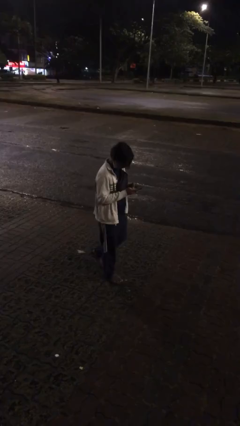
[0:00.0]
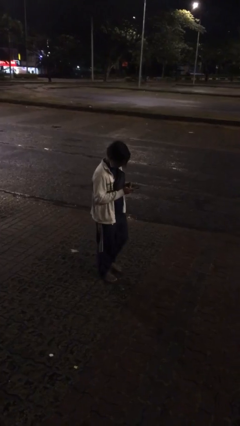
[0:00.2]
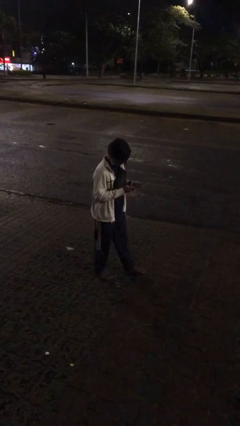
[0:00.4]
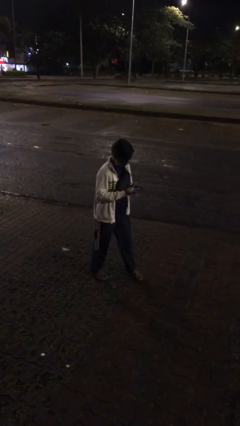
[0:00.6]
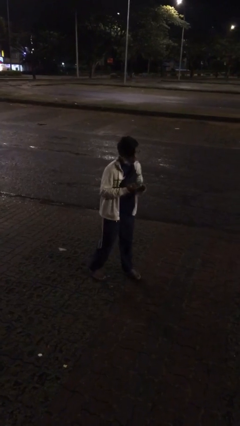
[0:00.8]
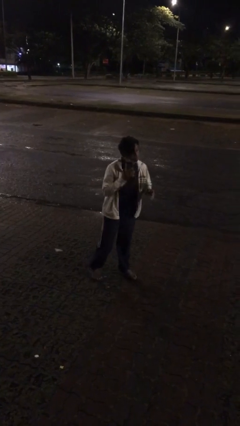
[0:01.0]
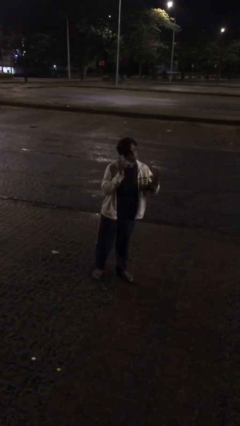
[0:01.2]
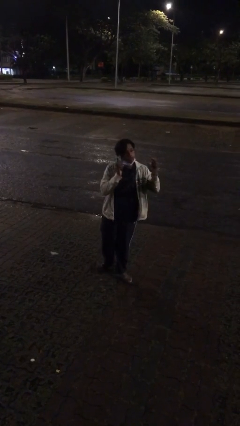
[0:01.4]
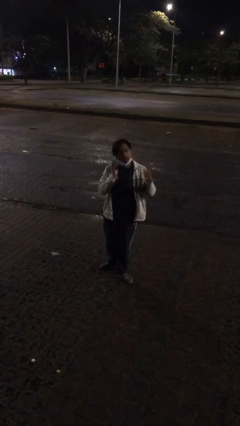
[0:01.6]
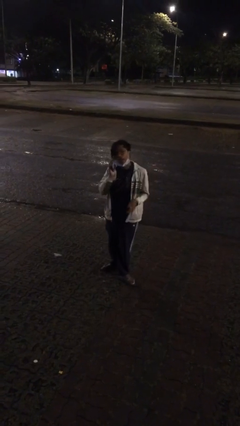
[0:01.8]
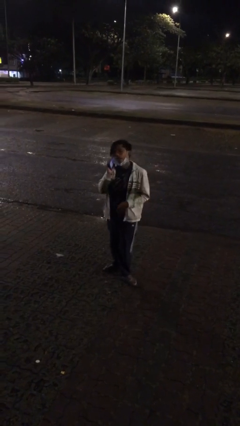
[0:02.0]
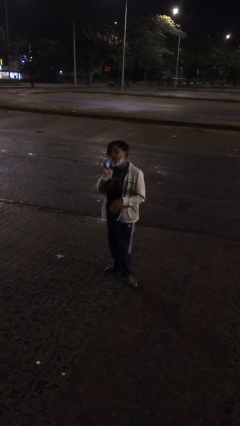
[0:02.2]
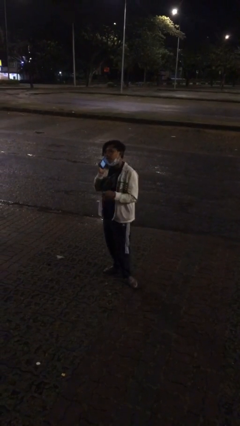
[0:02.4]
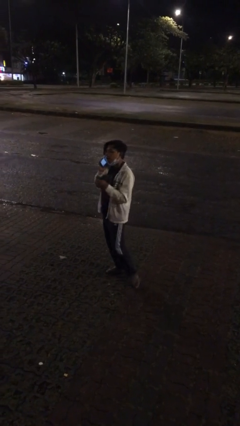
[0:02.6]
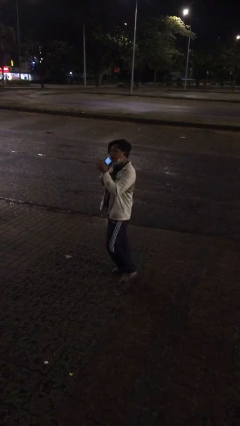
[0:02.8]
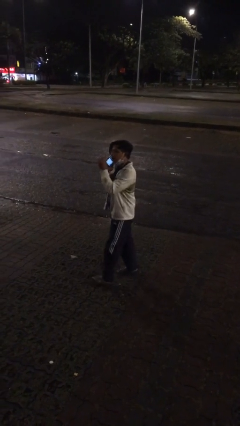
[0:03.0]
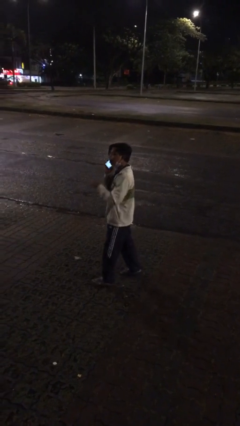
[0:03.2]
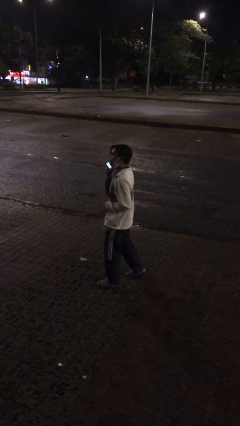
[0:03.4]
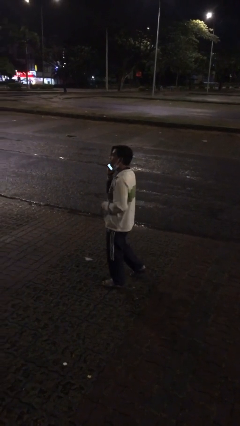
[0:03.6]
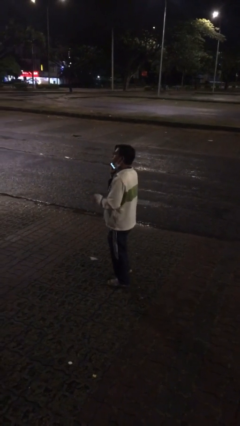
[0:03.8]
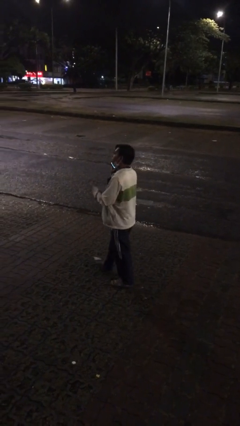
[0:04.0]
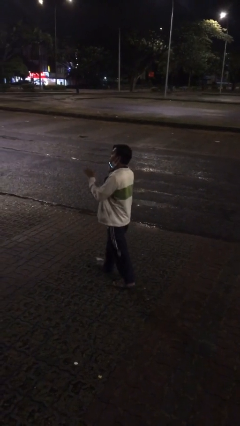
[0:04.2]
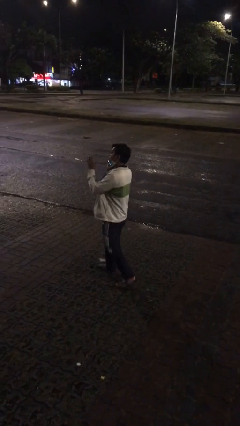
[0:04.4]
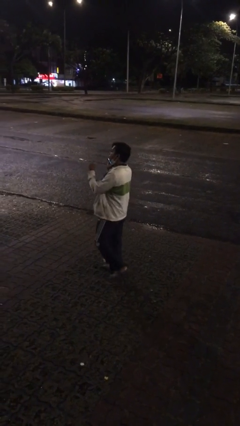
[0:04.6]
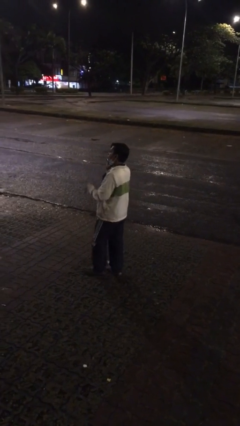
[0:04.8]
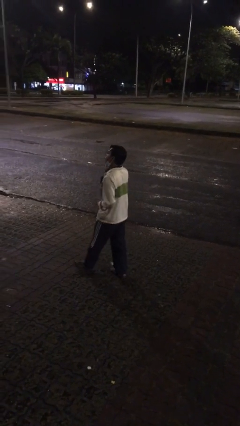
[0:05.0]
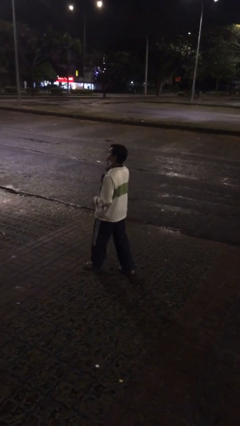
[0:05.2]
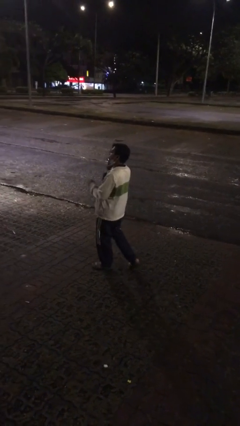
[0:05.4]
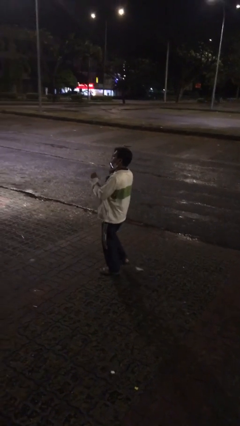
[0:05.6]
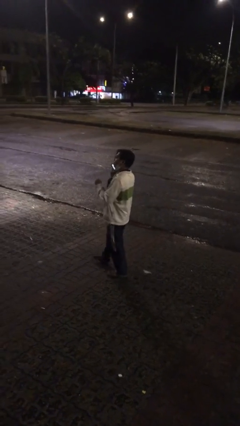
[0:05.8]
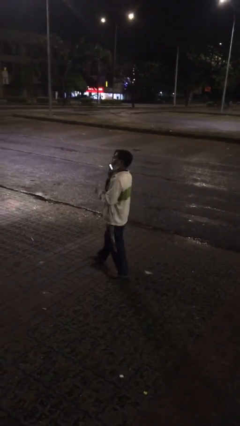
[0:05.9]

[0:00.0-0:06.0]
person talks on phone

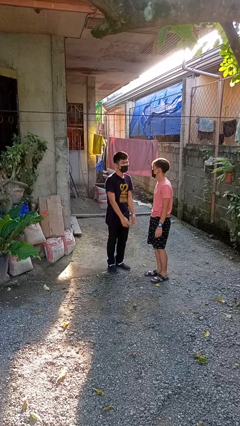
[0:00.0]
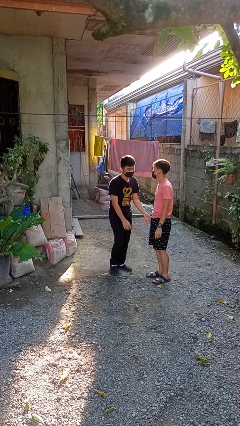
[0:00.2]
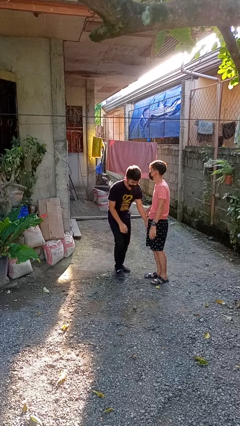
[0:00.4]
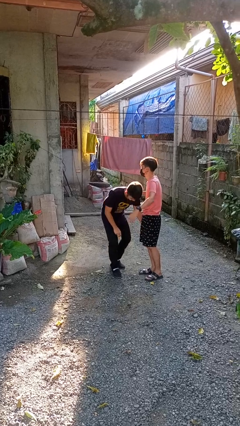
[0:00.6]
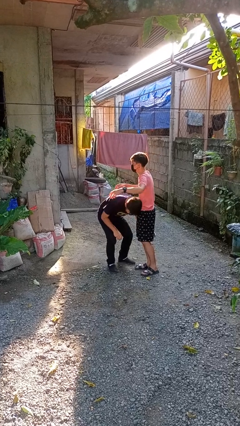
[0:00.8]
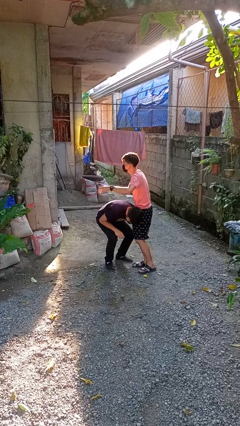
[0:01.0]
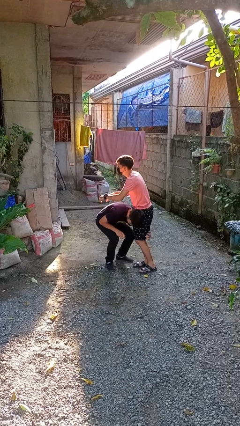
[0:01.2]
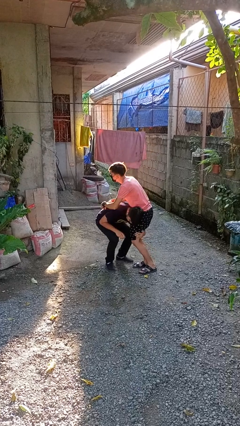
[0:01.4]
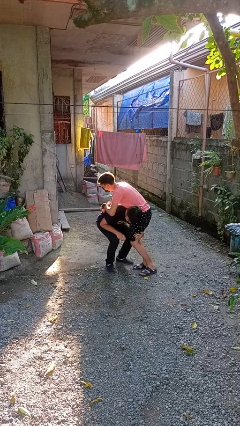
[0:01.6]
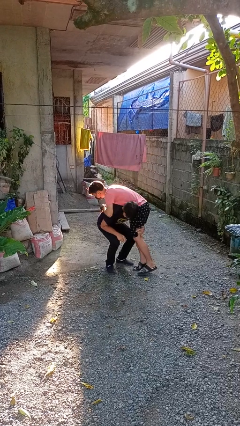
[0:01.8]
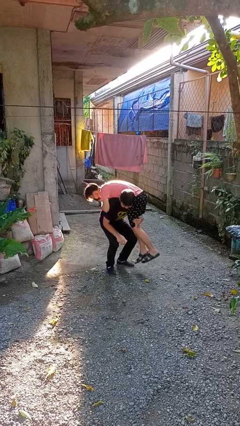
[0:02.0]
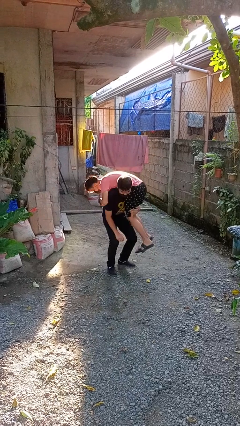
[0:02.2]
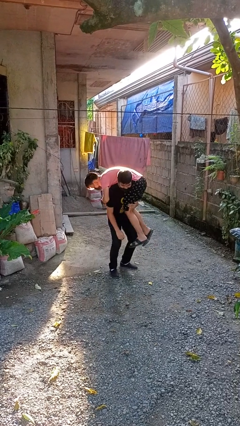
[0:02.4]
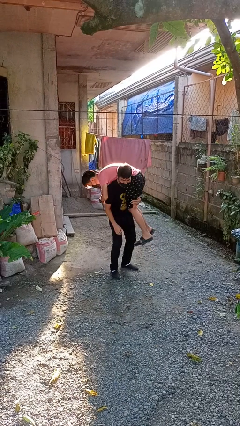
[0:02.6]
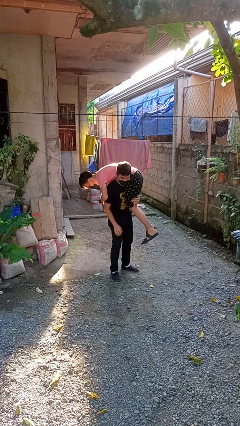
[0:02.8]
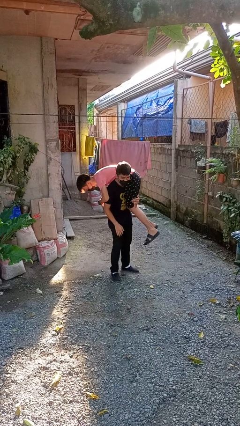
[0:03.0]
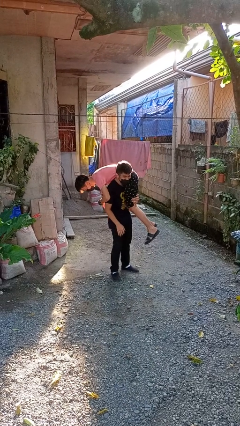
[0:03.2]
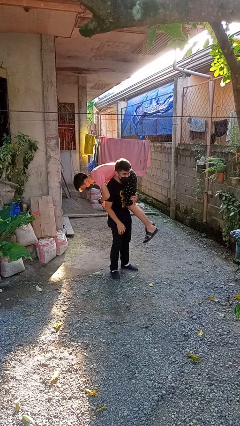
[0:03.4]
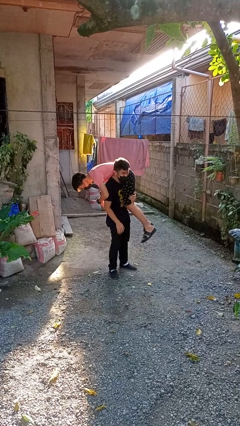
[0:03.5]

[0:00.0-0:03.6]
person carries person over shoulder

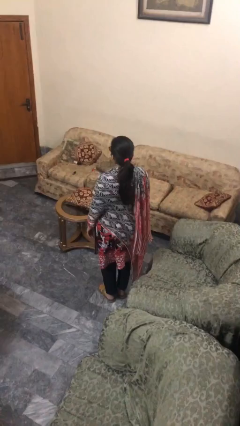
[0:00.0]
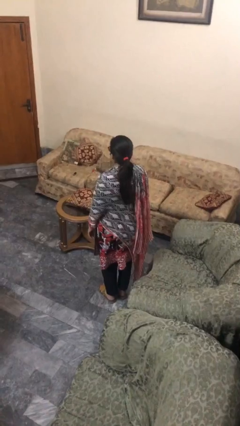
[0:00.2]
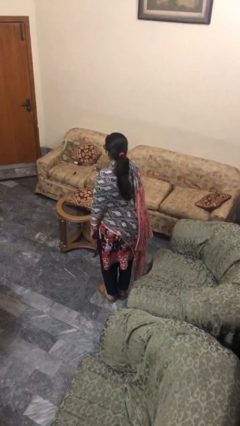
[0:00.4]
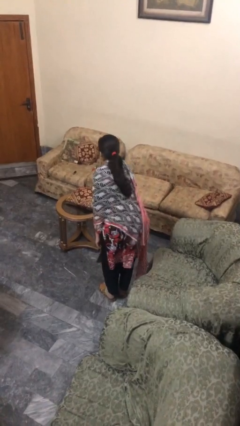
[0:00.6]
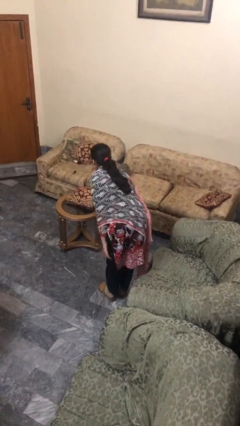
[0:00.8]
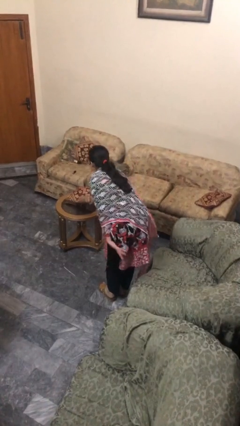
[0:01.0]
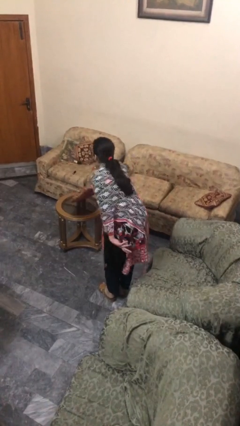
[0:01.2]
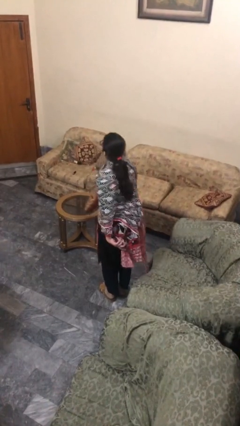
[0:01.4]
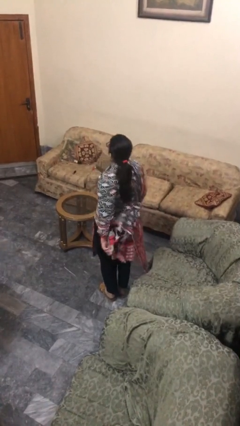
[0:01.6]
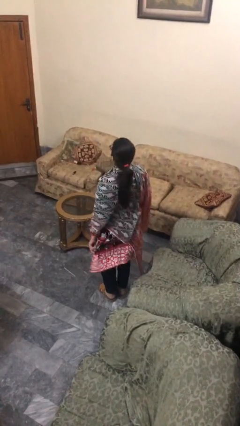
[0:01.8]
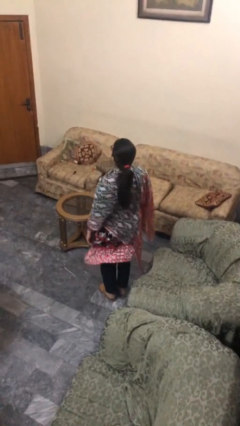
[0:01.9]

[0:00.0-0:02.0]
person picks up object from table

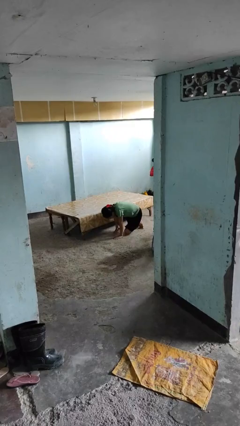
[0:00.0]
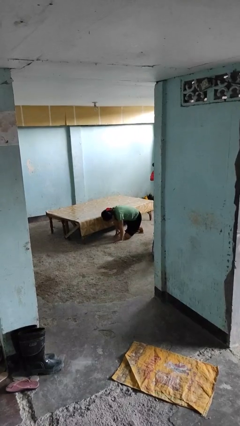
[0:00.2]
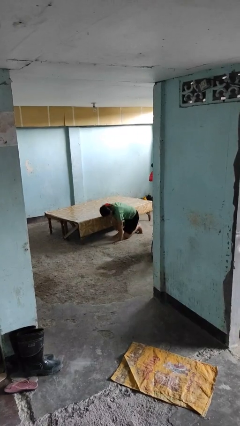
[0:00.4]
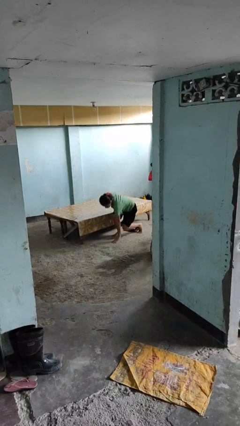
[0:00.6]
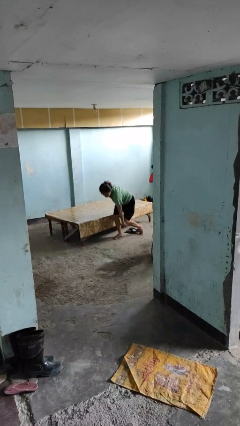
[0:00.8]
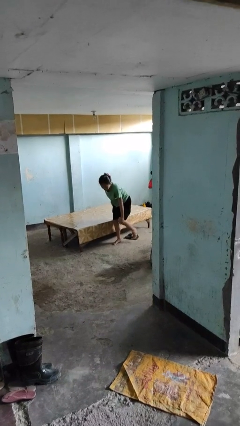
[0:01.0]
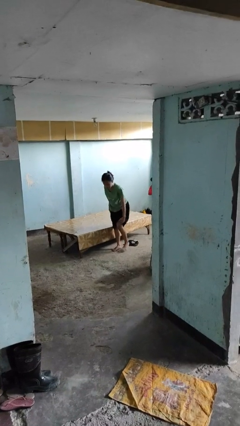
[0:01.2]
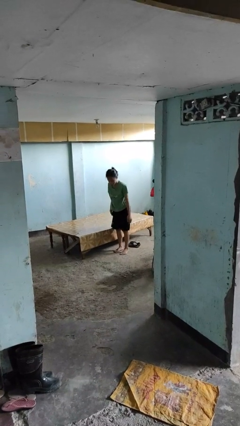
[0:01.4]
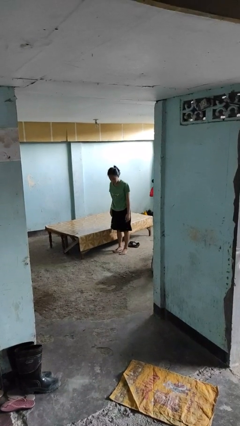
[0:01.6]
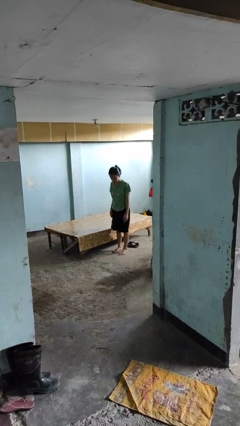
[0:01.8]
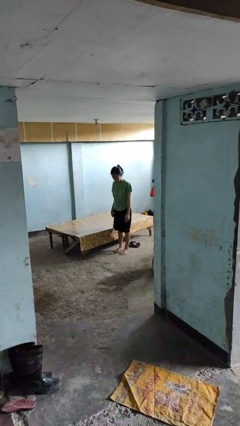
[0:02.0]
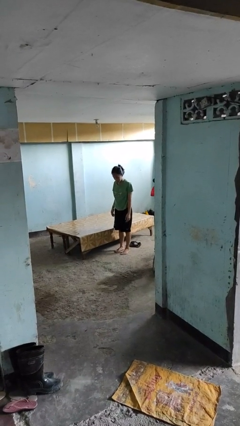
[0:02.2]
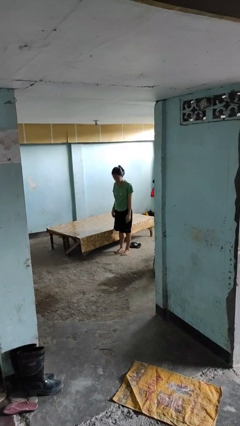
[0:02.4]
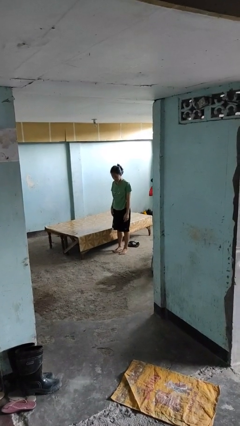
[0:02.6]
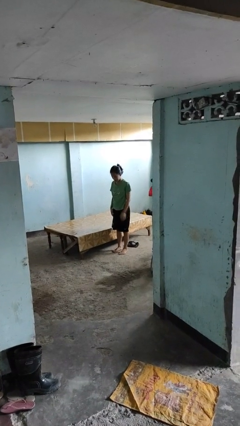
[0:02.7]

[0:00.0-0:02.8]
person stands up from floor

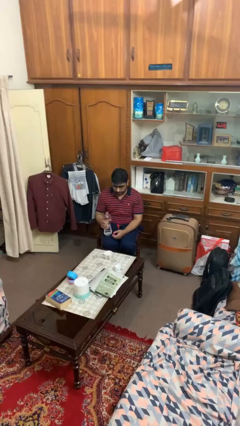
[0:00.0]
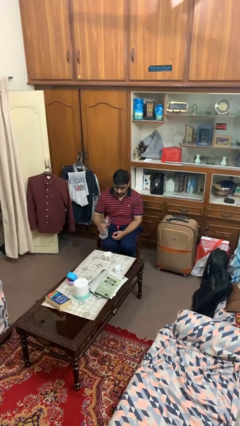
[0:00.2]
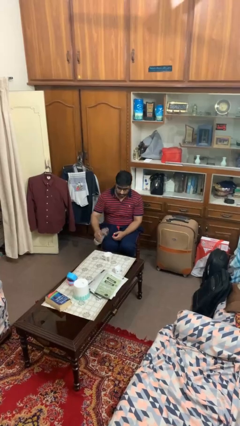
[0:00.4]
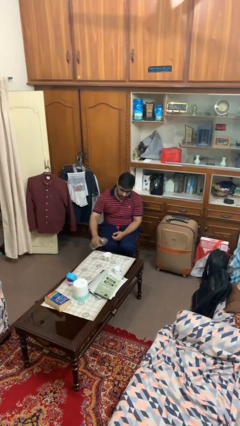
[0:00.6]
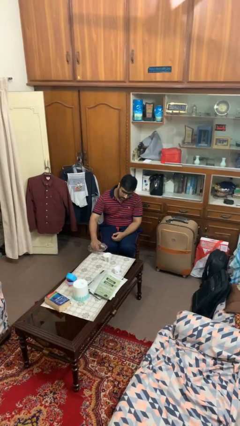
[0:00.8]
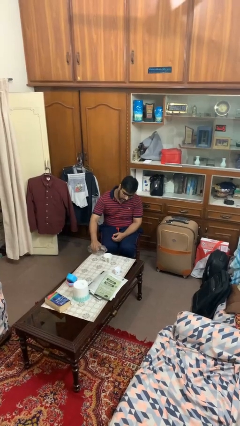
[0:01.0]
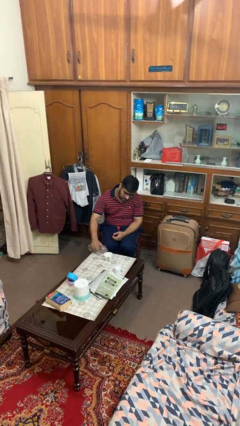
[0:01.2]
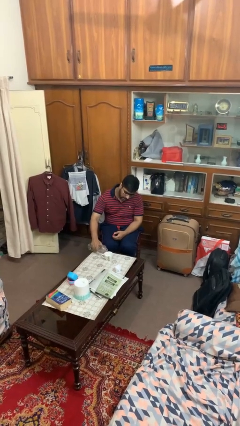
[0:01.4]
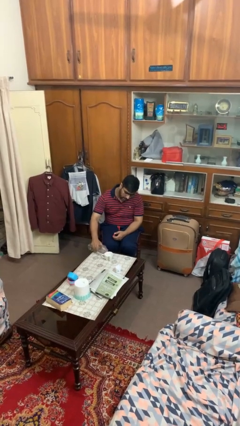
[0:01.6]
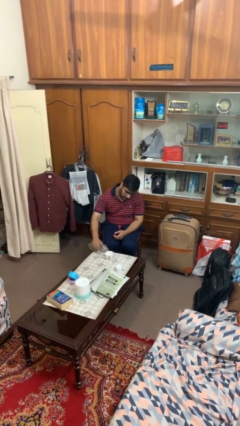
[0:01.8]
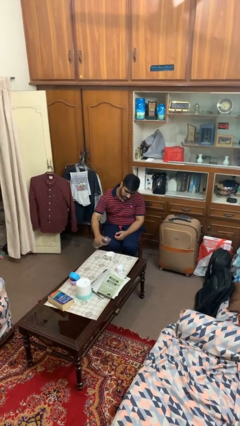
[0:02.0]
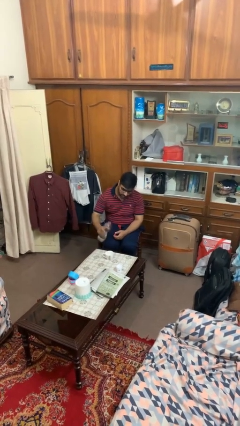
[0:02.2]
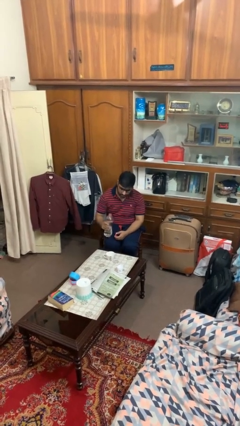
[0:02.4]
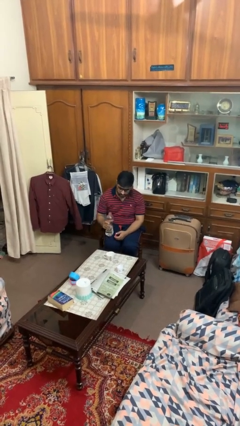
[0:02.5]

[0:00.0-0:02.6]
person pours liquid into cup
